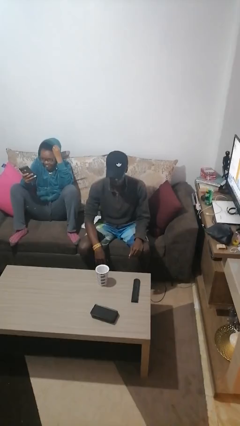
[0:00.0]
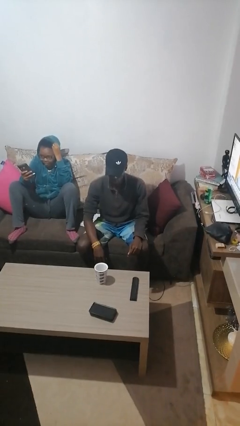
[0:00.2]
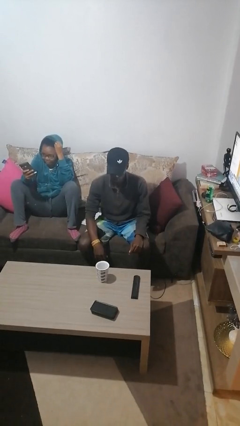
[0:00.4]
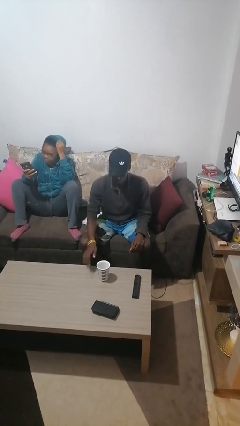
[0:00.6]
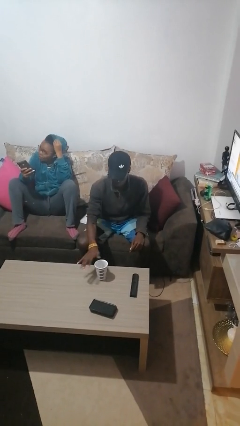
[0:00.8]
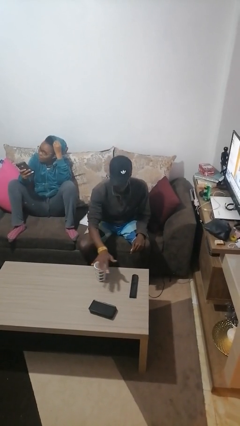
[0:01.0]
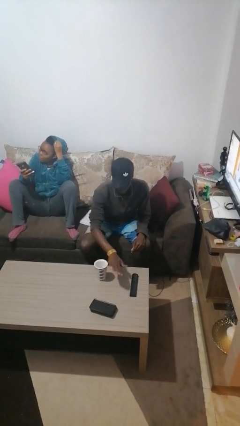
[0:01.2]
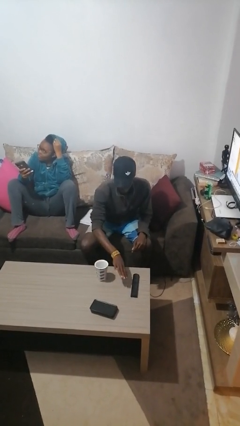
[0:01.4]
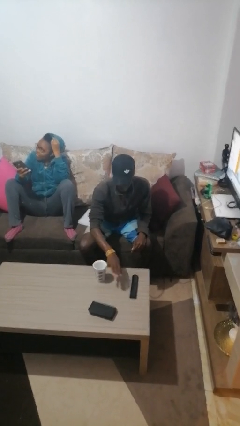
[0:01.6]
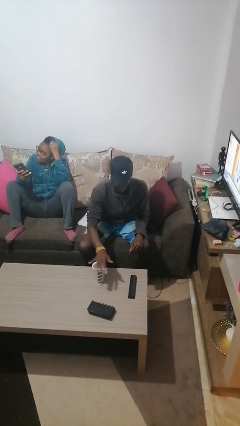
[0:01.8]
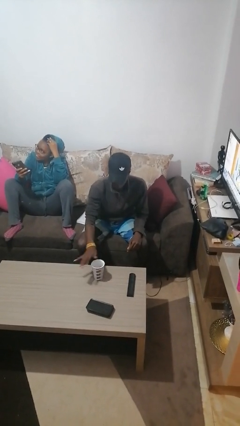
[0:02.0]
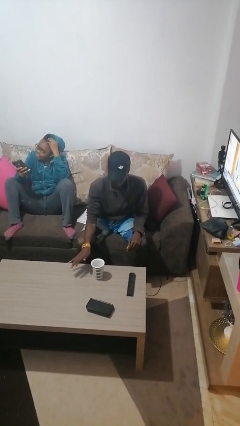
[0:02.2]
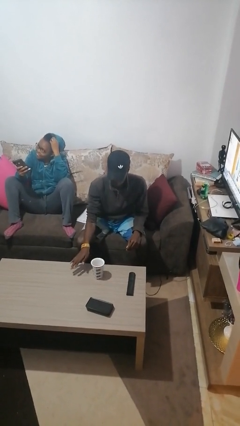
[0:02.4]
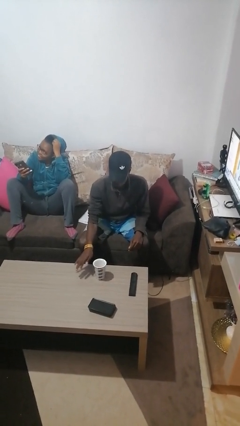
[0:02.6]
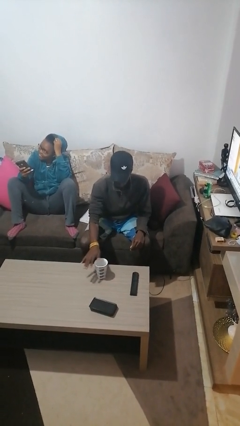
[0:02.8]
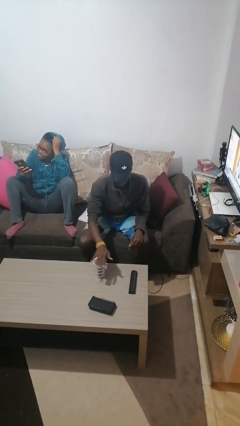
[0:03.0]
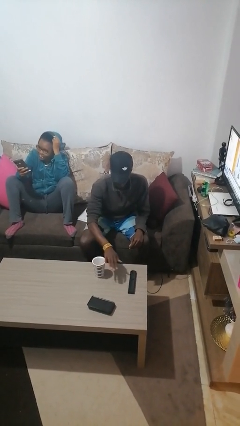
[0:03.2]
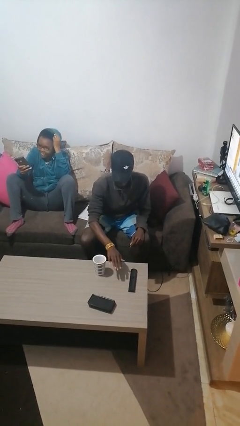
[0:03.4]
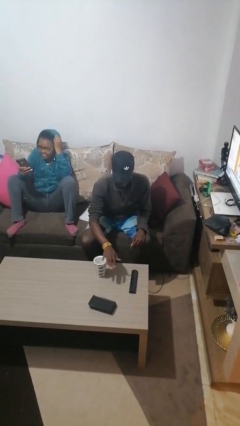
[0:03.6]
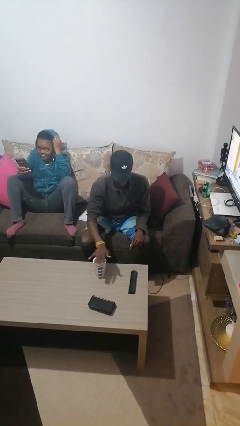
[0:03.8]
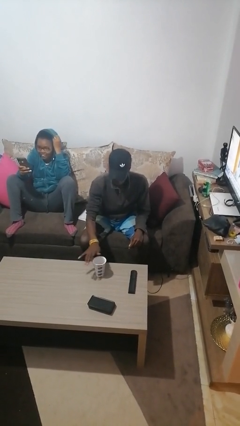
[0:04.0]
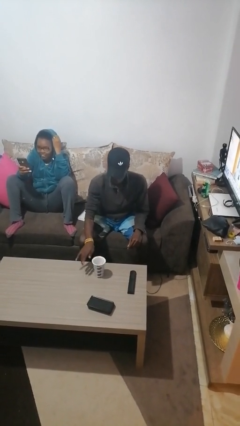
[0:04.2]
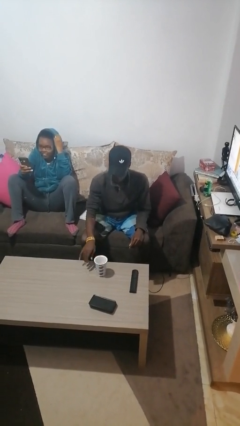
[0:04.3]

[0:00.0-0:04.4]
person waves hand over object

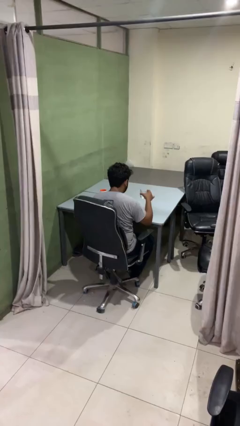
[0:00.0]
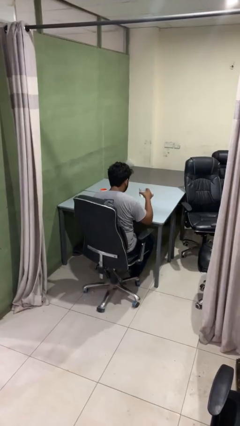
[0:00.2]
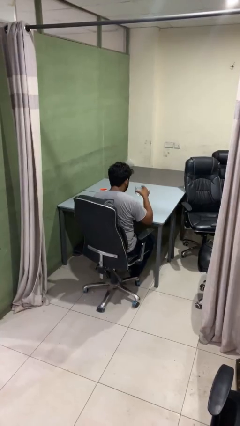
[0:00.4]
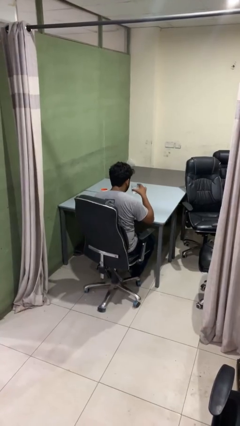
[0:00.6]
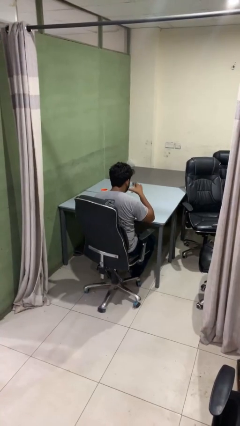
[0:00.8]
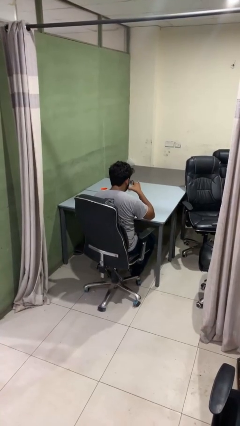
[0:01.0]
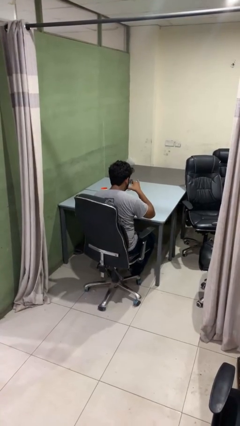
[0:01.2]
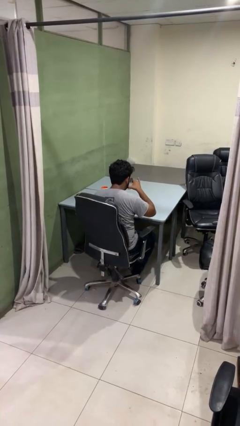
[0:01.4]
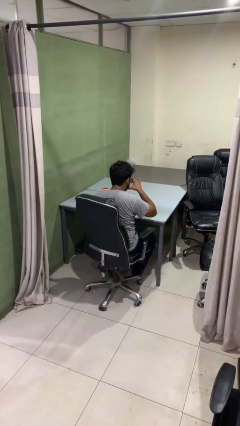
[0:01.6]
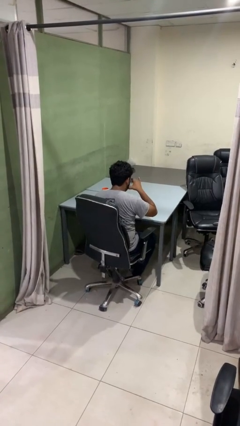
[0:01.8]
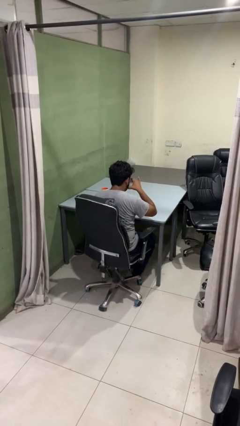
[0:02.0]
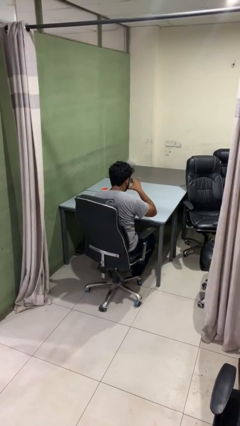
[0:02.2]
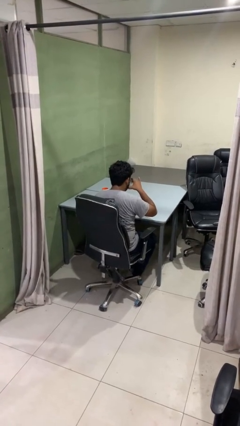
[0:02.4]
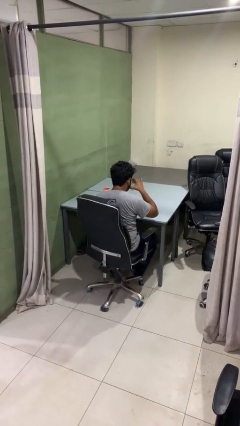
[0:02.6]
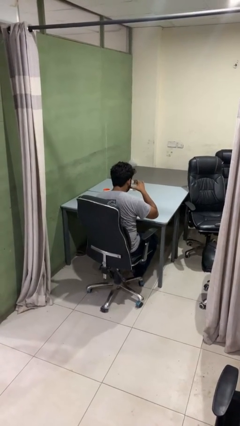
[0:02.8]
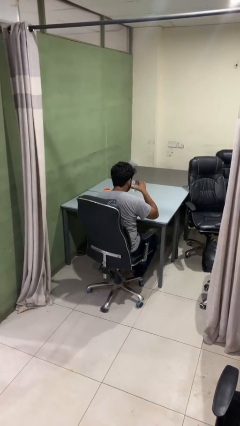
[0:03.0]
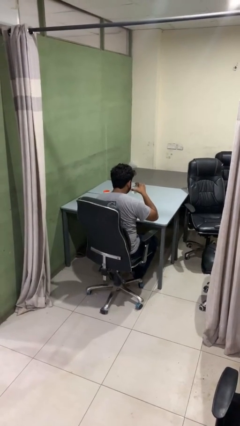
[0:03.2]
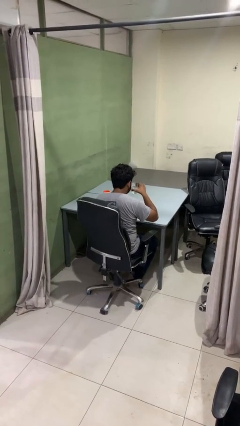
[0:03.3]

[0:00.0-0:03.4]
person drinks from shotglass

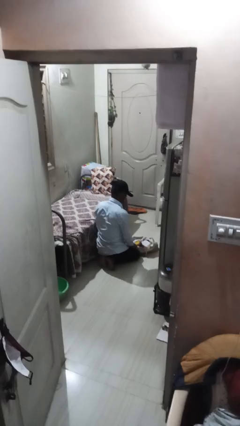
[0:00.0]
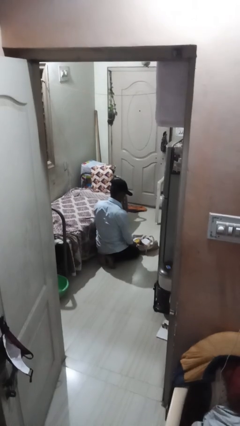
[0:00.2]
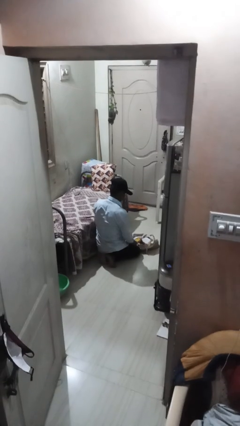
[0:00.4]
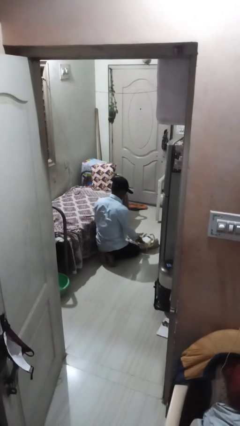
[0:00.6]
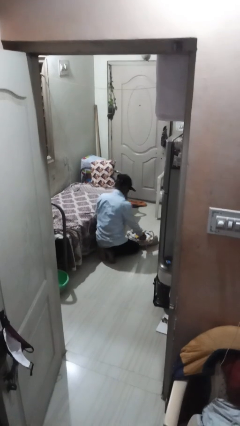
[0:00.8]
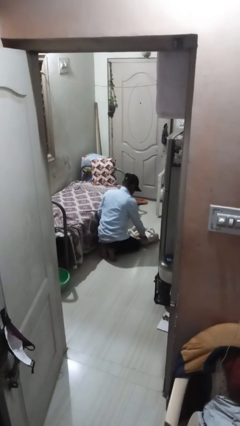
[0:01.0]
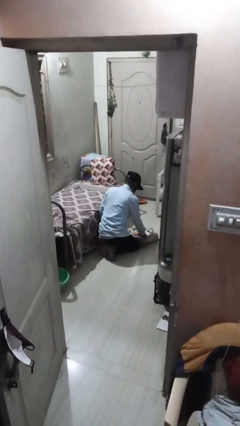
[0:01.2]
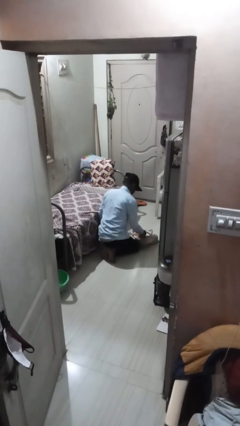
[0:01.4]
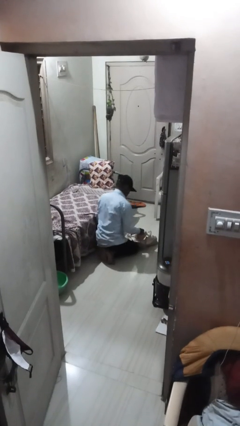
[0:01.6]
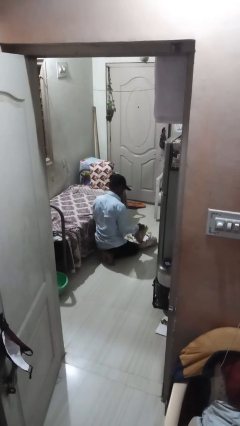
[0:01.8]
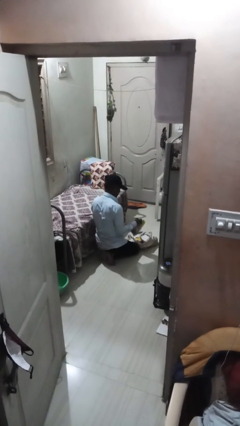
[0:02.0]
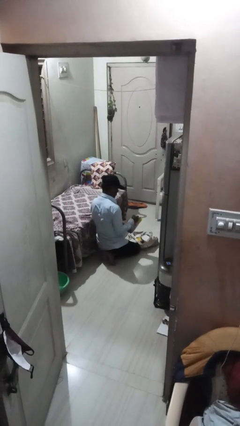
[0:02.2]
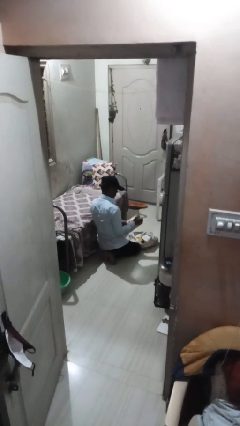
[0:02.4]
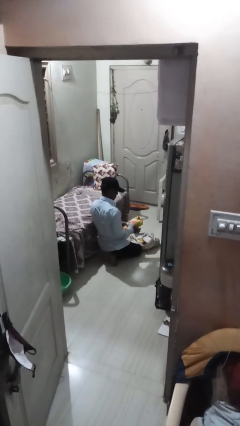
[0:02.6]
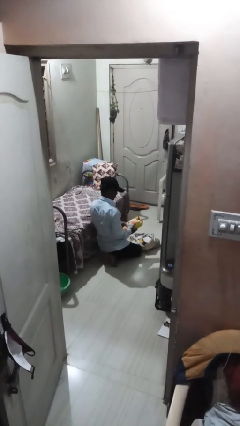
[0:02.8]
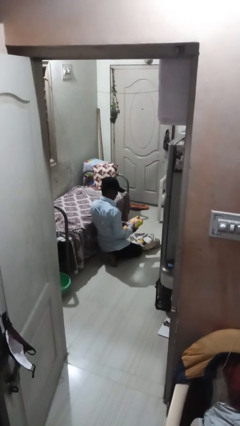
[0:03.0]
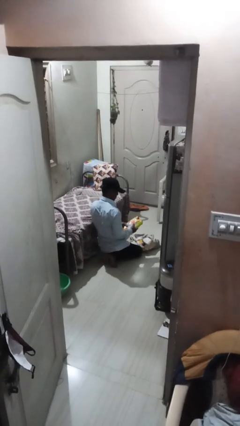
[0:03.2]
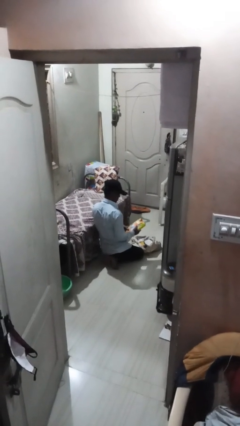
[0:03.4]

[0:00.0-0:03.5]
person takes object from bag

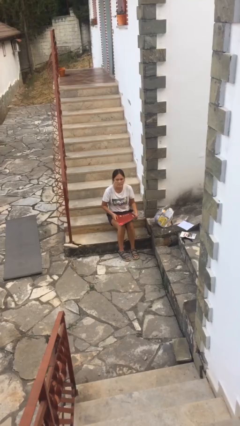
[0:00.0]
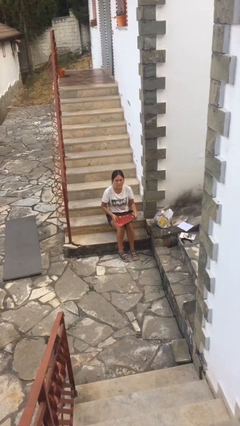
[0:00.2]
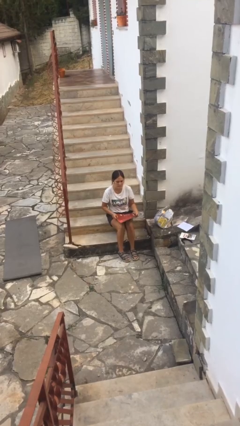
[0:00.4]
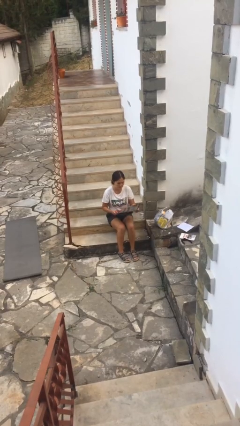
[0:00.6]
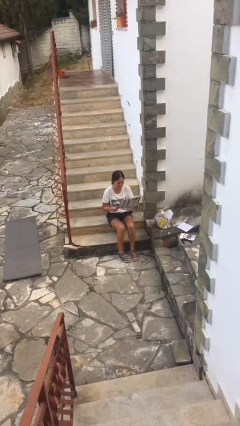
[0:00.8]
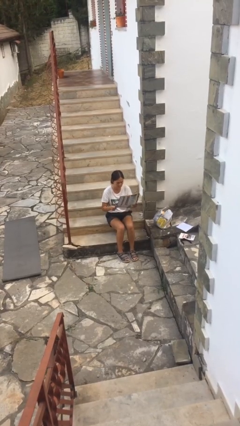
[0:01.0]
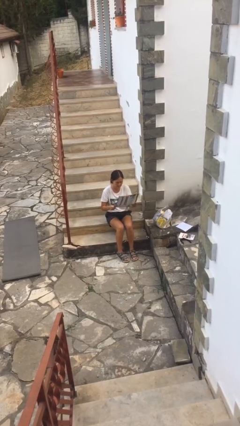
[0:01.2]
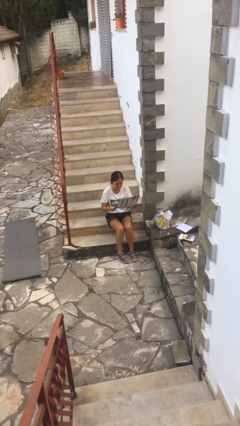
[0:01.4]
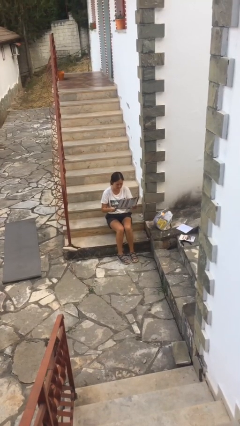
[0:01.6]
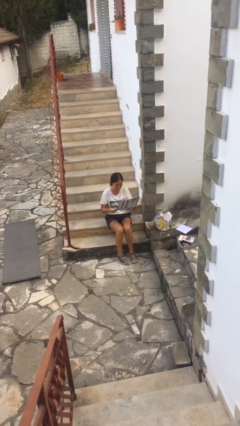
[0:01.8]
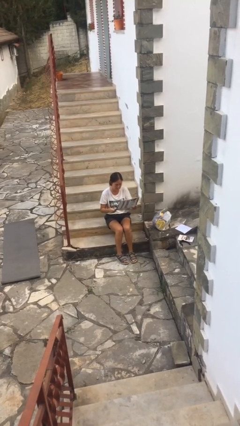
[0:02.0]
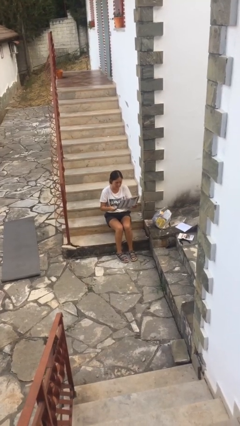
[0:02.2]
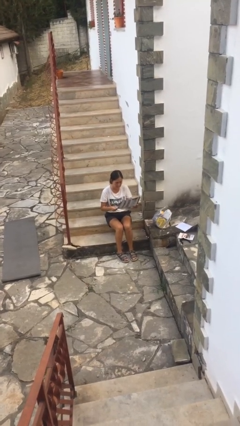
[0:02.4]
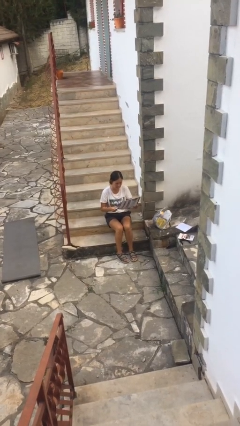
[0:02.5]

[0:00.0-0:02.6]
person reads newspaper

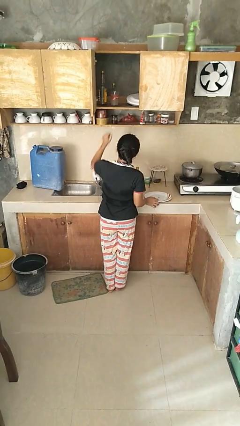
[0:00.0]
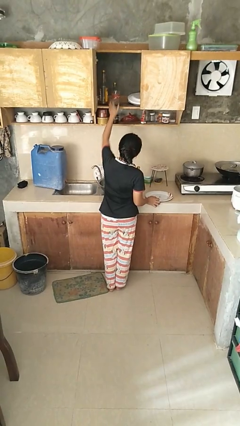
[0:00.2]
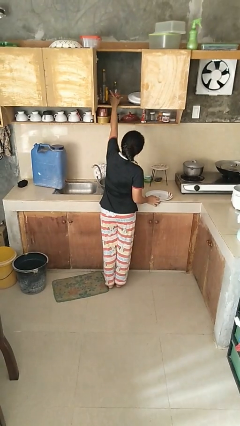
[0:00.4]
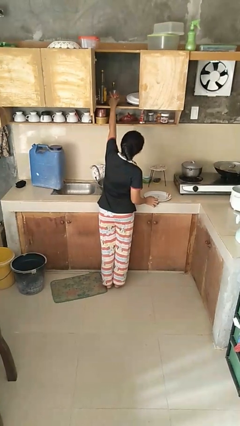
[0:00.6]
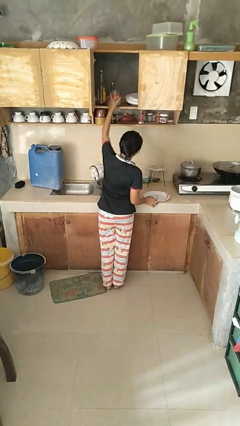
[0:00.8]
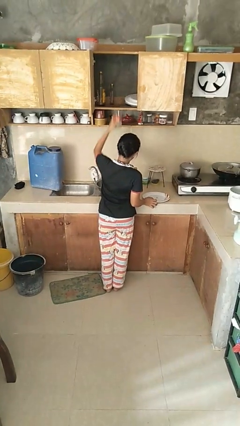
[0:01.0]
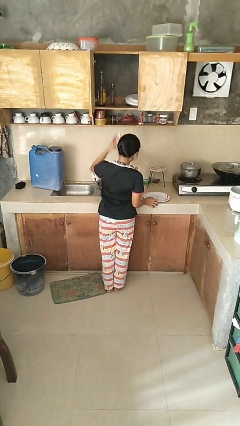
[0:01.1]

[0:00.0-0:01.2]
person takes object from cabinet

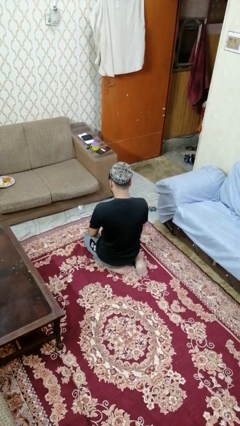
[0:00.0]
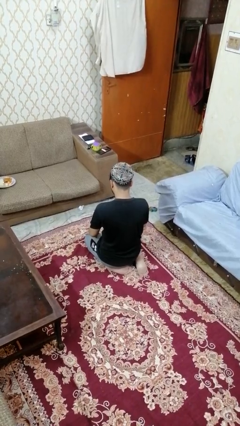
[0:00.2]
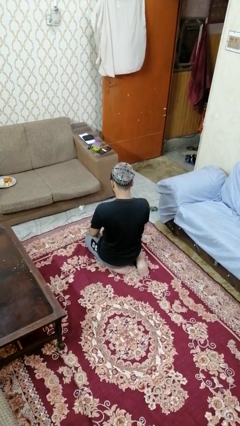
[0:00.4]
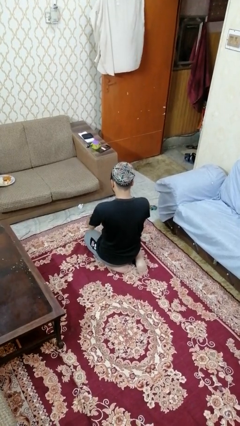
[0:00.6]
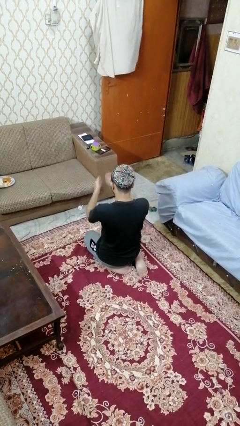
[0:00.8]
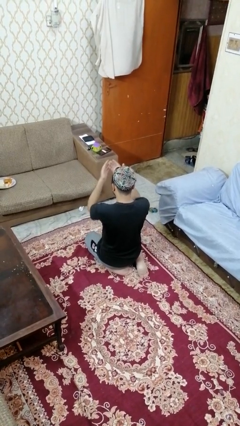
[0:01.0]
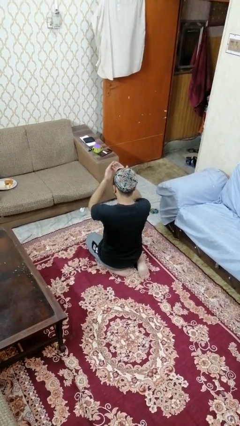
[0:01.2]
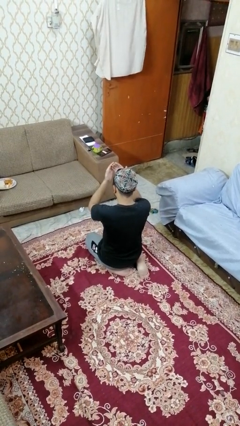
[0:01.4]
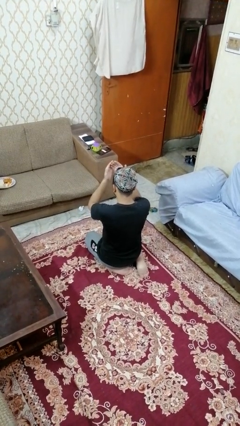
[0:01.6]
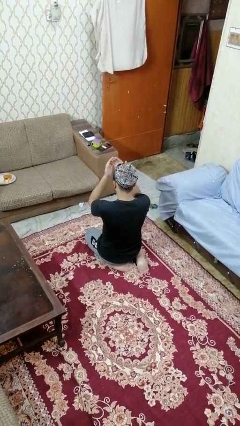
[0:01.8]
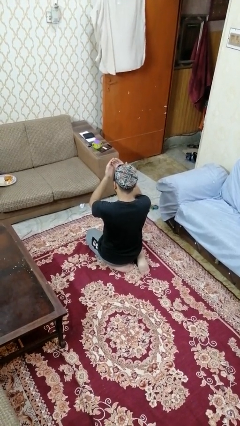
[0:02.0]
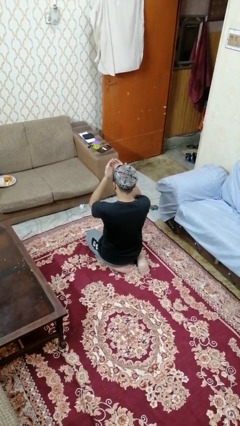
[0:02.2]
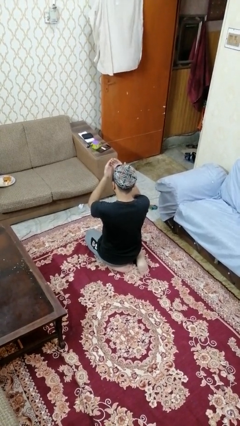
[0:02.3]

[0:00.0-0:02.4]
person prays
